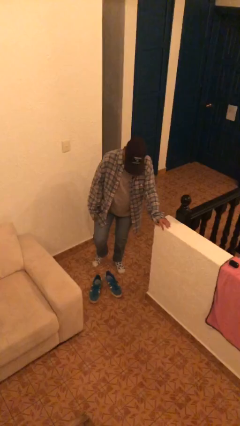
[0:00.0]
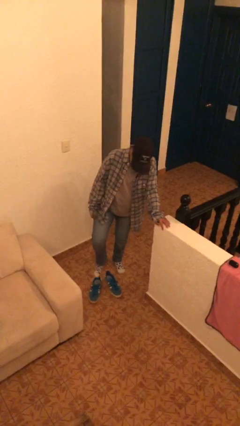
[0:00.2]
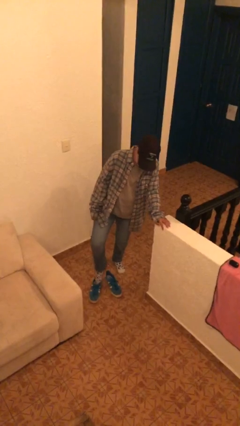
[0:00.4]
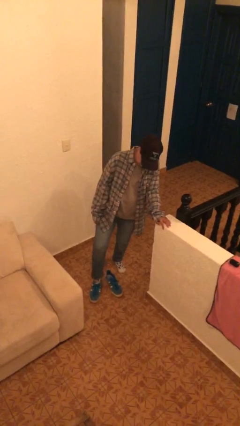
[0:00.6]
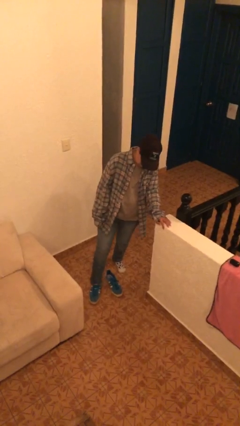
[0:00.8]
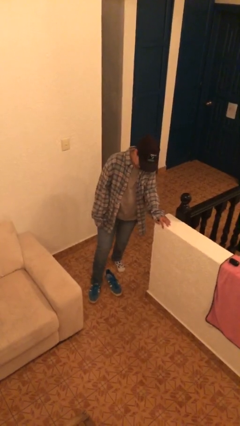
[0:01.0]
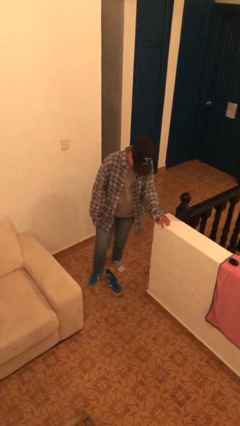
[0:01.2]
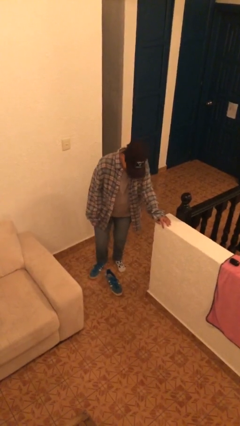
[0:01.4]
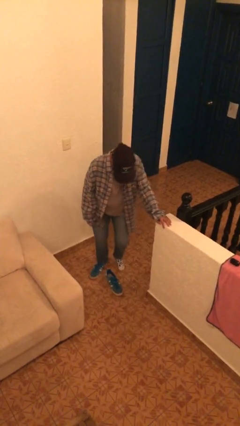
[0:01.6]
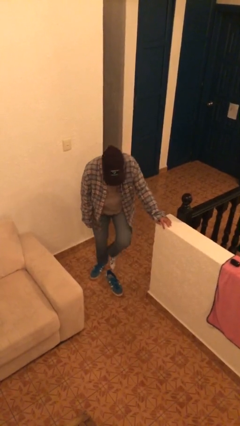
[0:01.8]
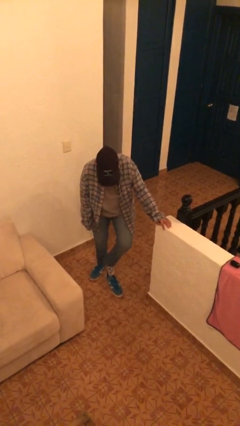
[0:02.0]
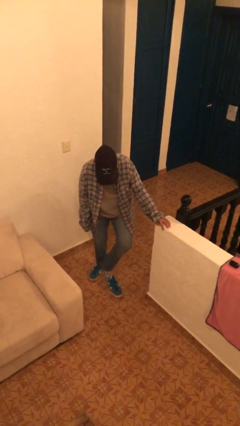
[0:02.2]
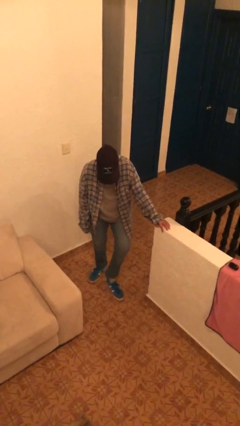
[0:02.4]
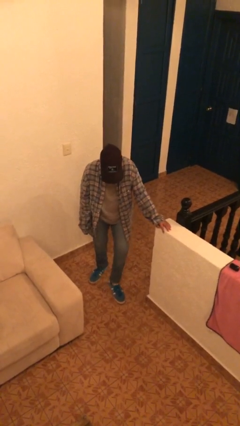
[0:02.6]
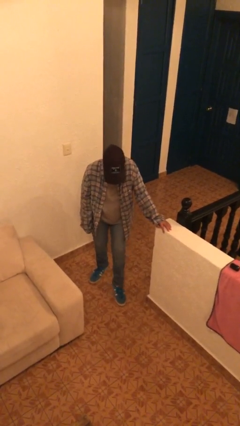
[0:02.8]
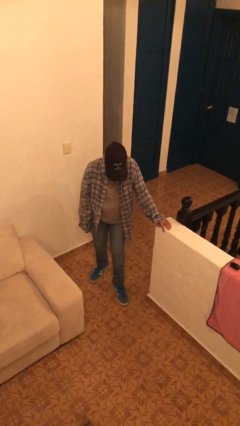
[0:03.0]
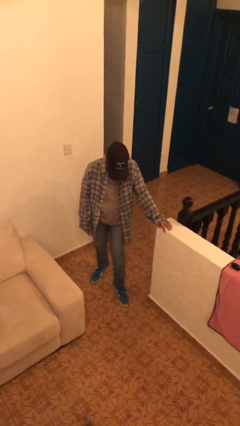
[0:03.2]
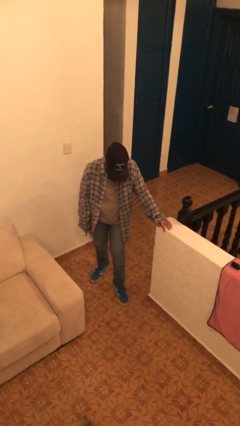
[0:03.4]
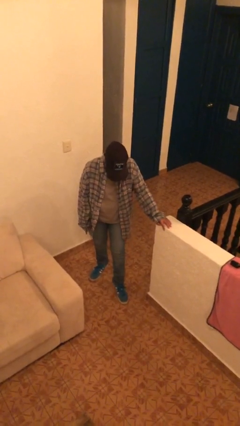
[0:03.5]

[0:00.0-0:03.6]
person puts on shoes

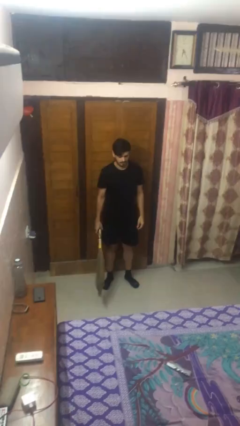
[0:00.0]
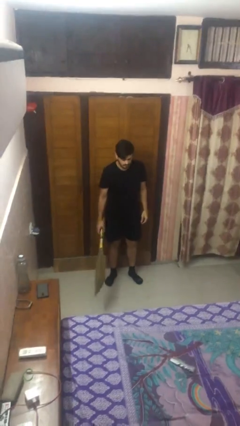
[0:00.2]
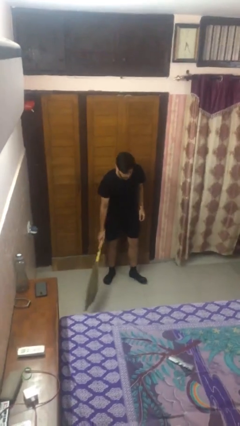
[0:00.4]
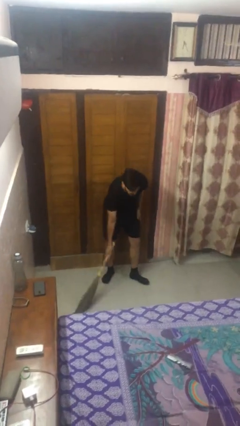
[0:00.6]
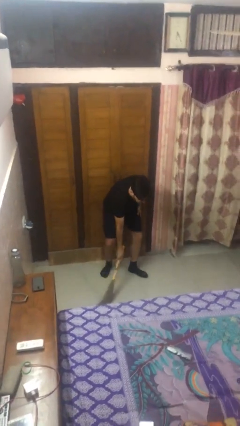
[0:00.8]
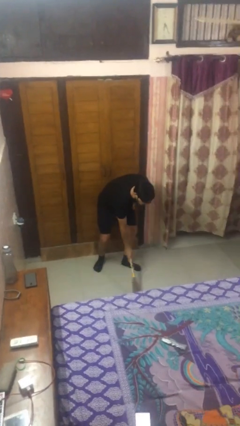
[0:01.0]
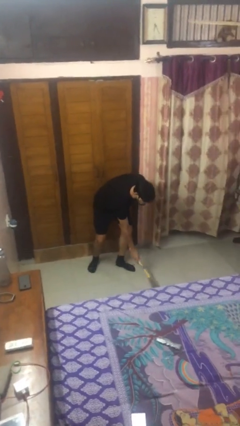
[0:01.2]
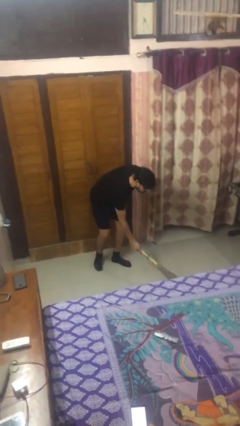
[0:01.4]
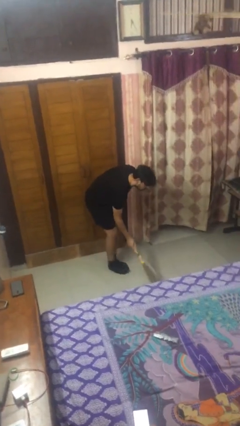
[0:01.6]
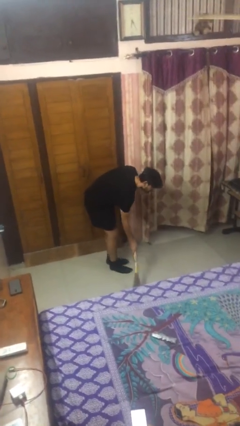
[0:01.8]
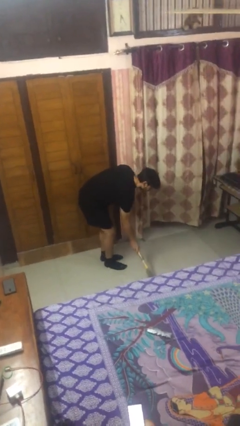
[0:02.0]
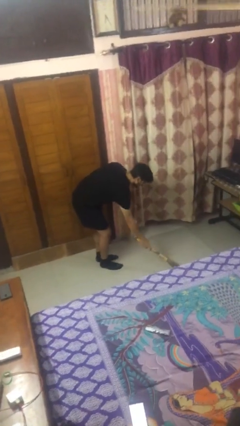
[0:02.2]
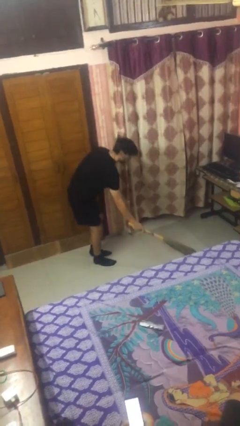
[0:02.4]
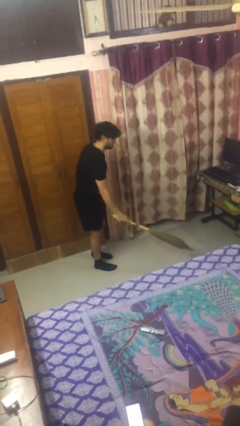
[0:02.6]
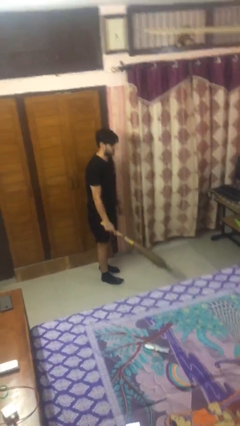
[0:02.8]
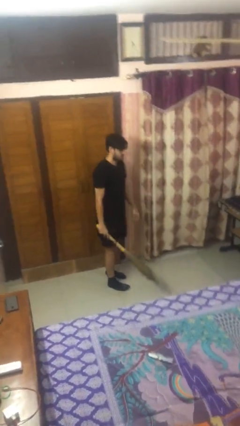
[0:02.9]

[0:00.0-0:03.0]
person sweeps floor

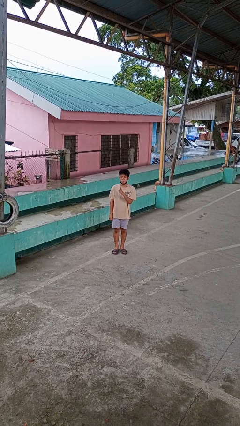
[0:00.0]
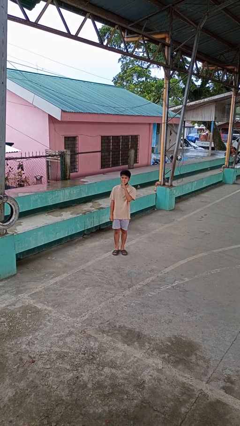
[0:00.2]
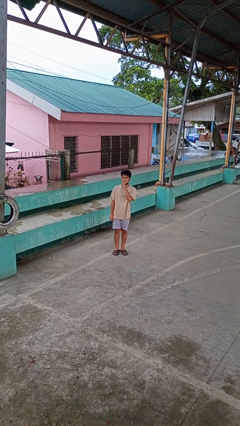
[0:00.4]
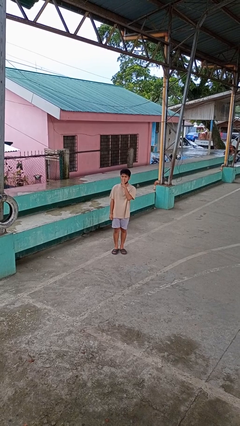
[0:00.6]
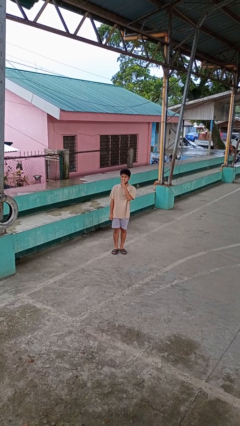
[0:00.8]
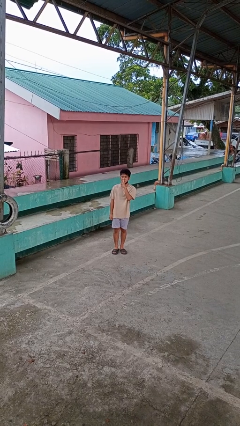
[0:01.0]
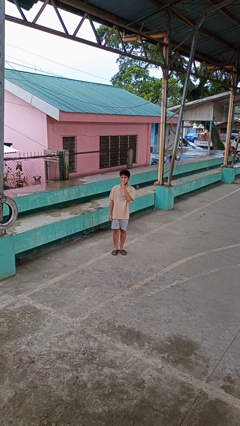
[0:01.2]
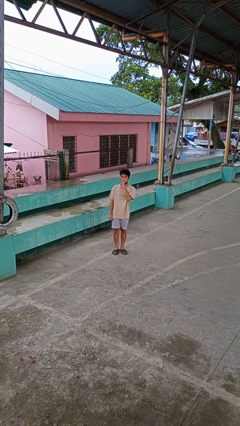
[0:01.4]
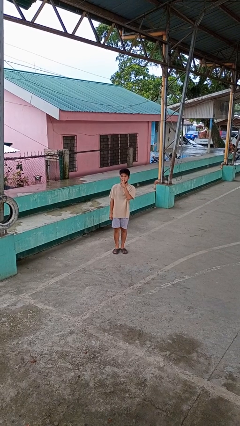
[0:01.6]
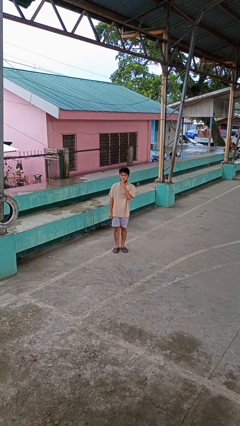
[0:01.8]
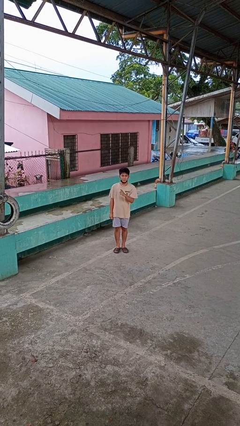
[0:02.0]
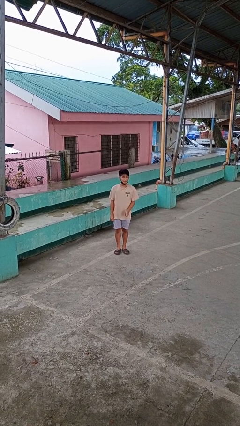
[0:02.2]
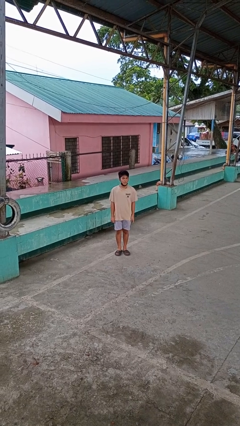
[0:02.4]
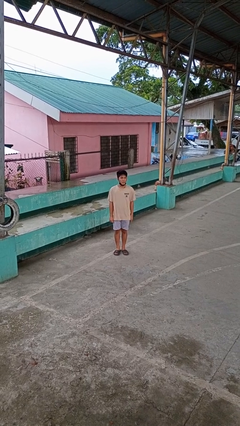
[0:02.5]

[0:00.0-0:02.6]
person gestures be quiet

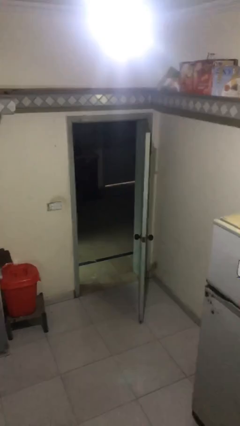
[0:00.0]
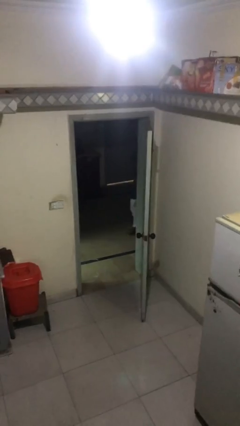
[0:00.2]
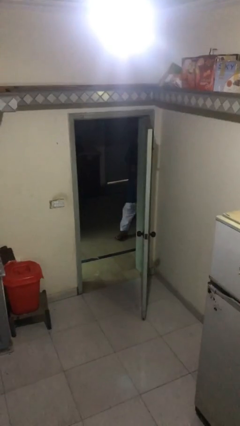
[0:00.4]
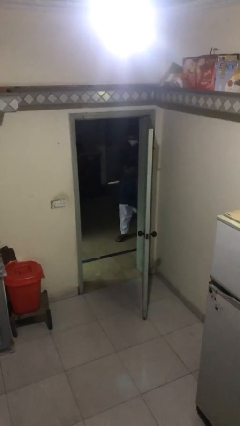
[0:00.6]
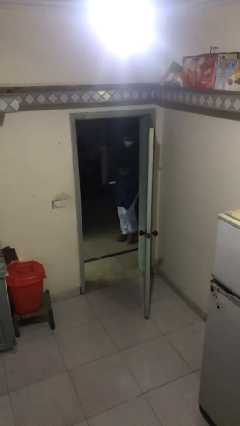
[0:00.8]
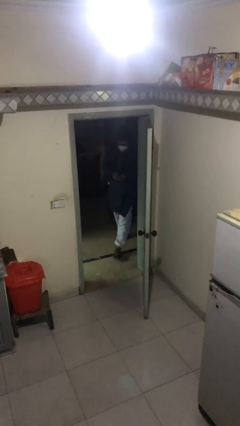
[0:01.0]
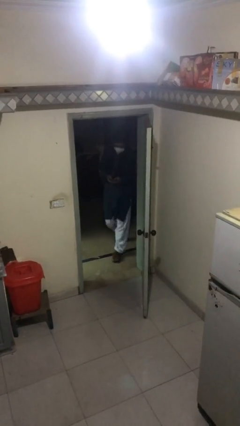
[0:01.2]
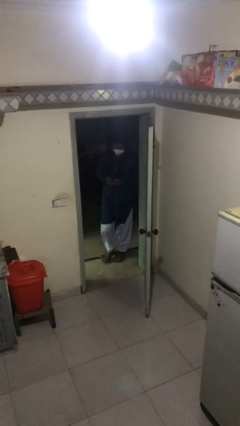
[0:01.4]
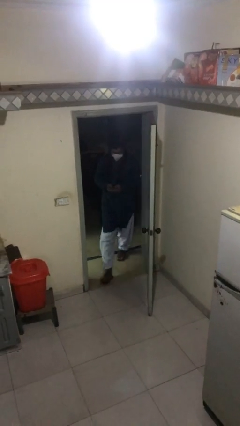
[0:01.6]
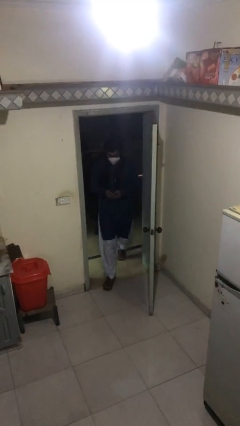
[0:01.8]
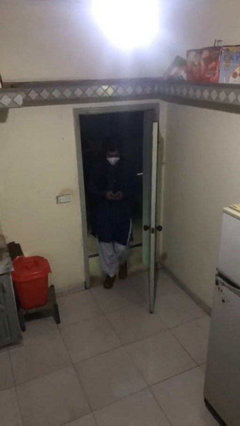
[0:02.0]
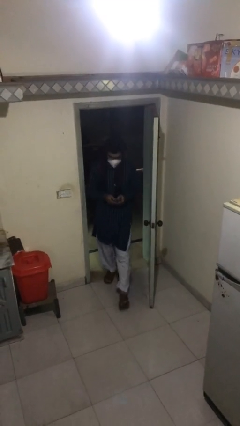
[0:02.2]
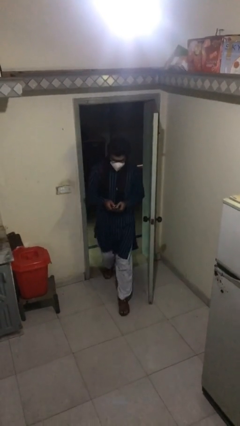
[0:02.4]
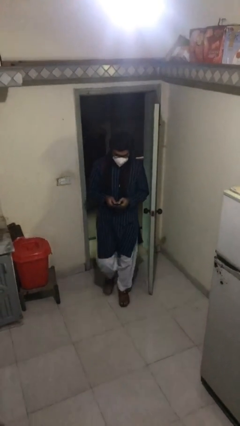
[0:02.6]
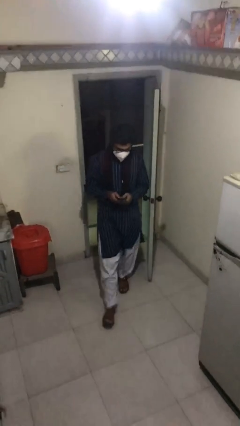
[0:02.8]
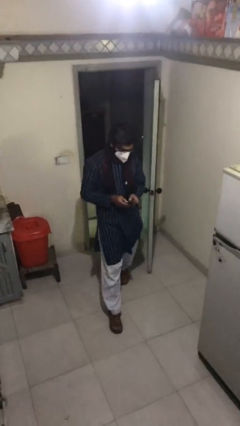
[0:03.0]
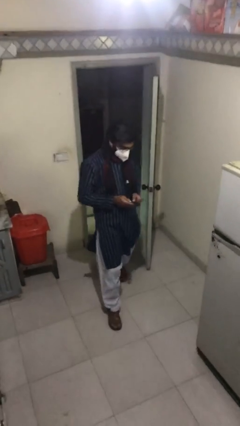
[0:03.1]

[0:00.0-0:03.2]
person enters scene through structure

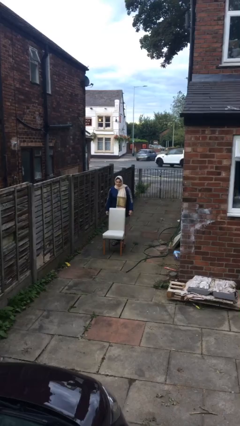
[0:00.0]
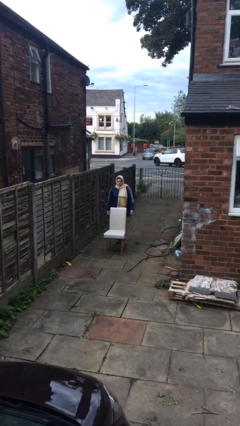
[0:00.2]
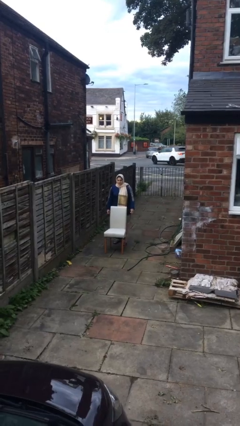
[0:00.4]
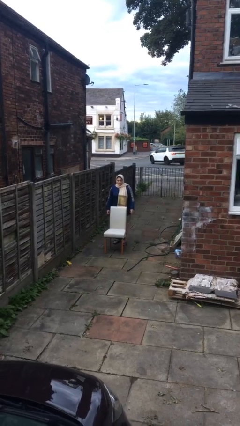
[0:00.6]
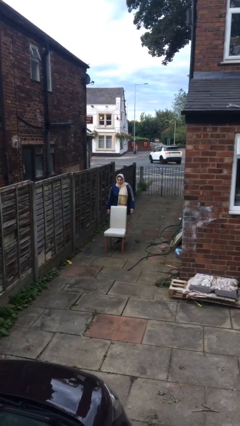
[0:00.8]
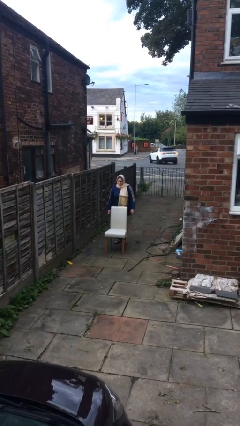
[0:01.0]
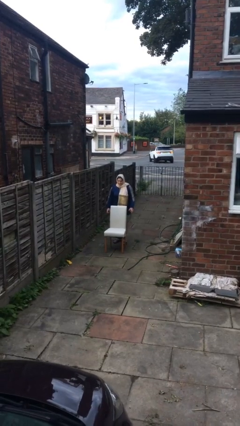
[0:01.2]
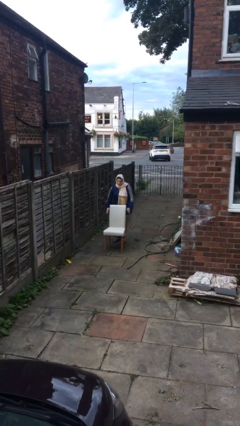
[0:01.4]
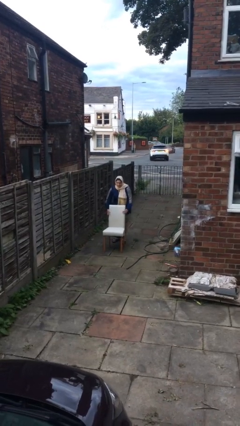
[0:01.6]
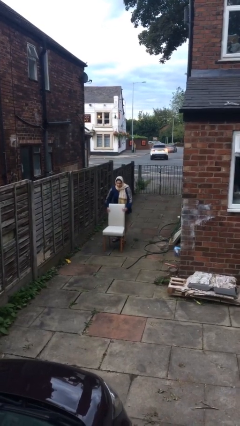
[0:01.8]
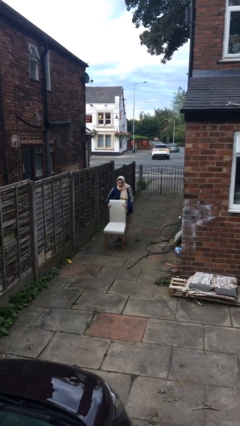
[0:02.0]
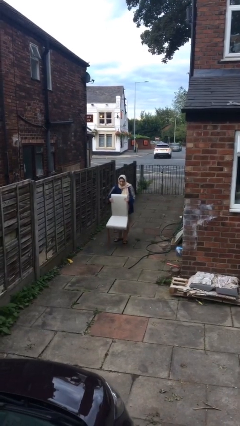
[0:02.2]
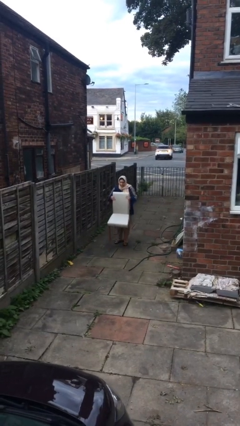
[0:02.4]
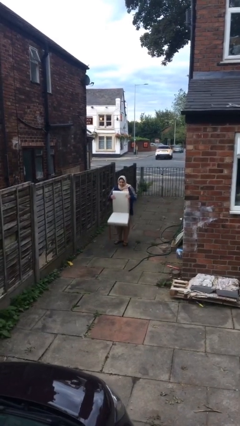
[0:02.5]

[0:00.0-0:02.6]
person picks up object from floor

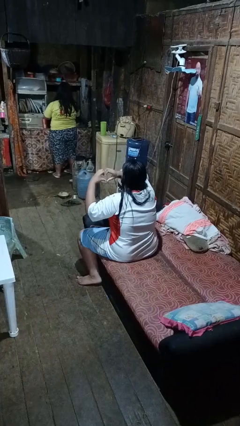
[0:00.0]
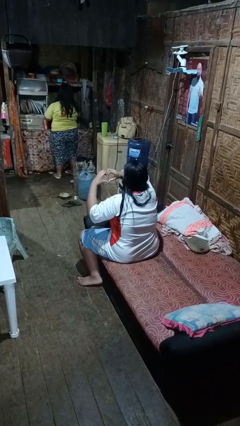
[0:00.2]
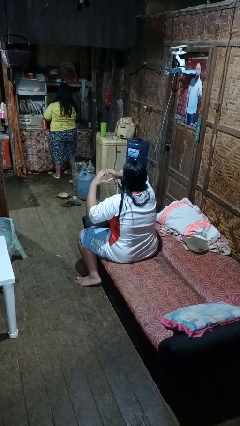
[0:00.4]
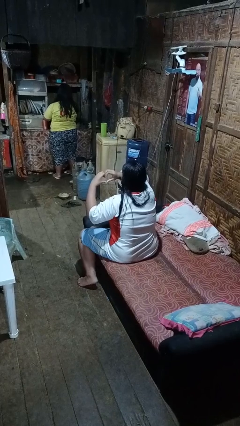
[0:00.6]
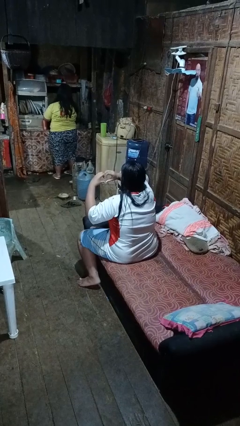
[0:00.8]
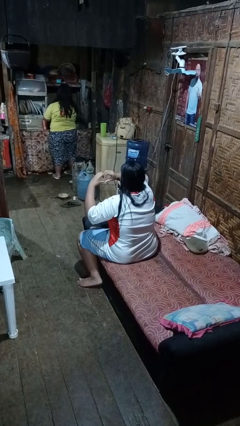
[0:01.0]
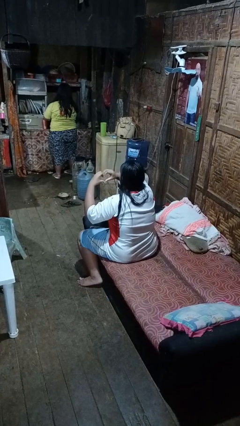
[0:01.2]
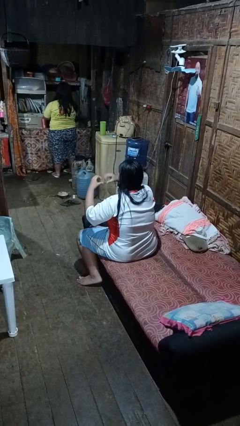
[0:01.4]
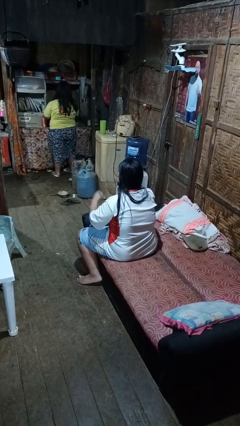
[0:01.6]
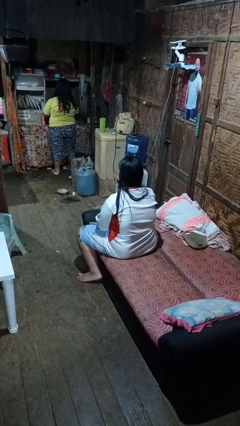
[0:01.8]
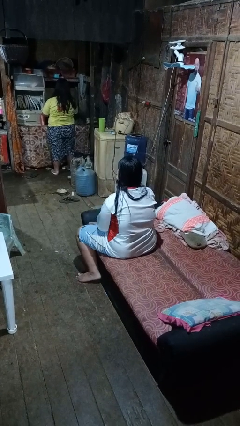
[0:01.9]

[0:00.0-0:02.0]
person gestures heart
